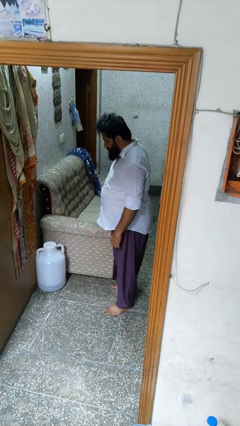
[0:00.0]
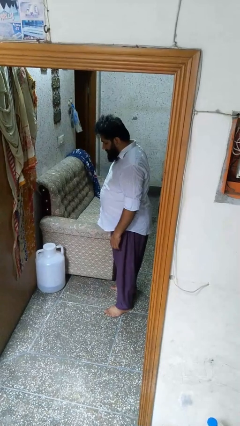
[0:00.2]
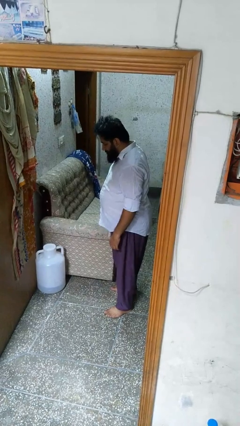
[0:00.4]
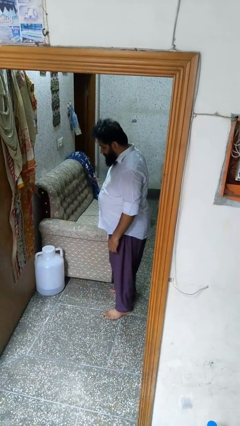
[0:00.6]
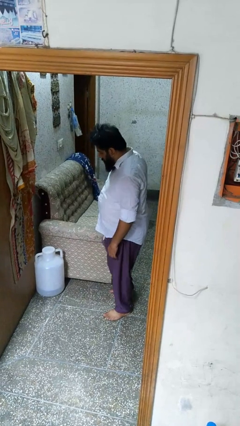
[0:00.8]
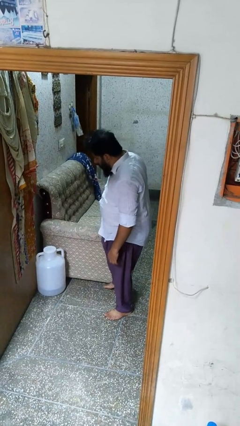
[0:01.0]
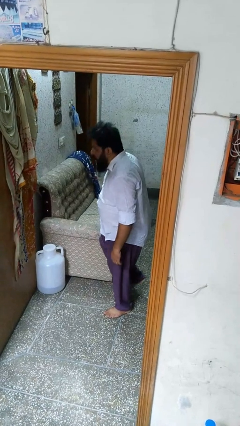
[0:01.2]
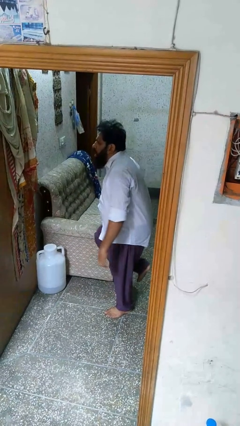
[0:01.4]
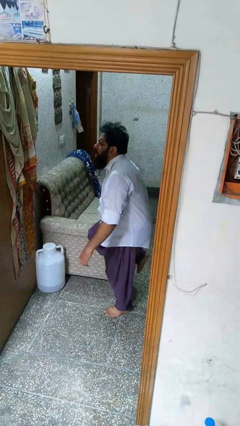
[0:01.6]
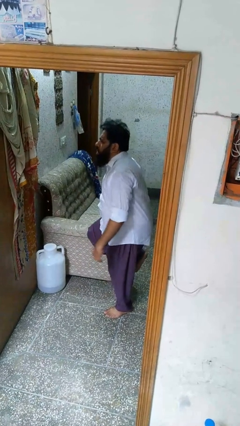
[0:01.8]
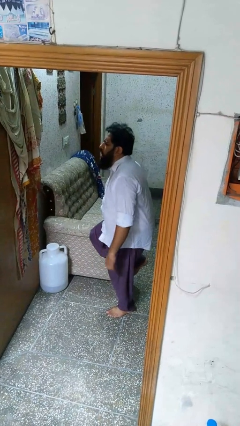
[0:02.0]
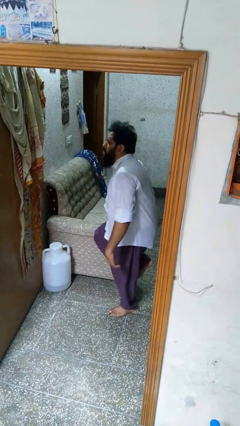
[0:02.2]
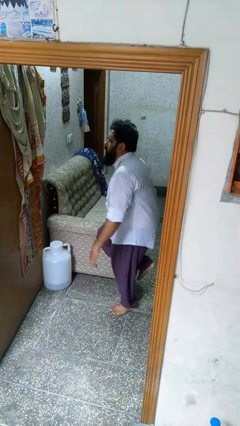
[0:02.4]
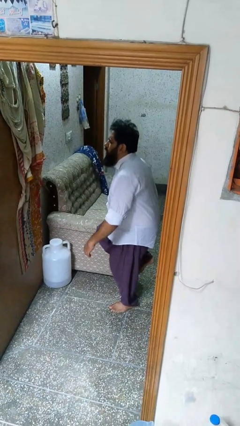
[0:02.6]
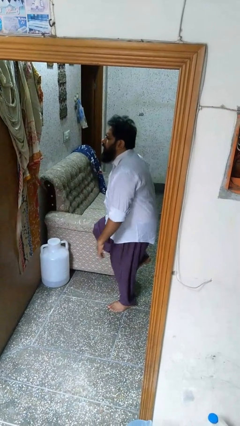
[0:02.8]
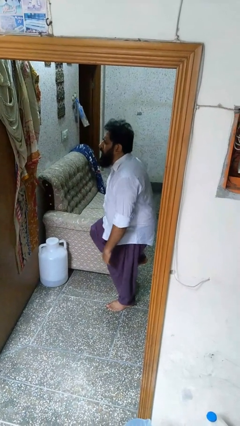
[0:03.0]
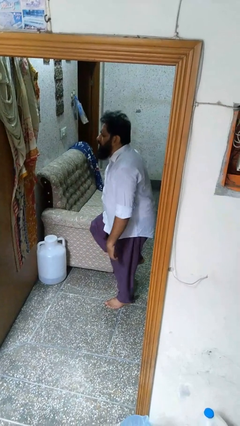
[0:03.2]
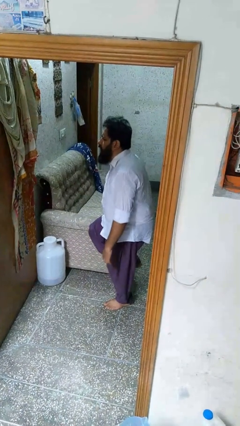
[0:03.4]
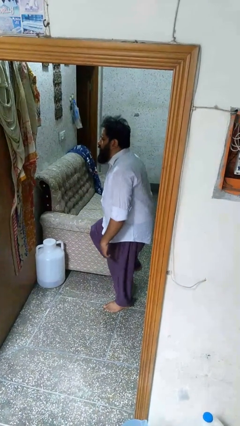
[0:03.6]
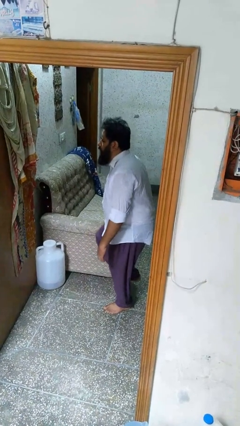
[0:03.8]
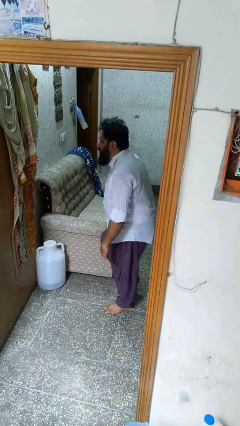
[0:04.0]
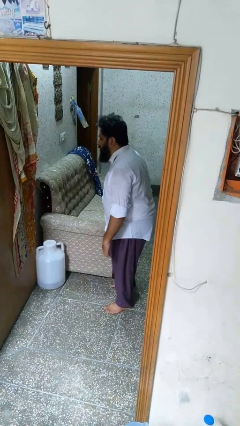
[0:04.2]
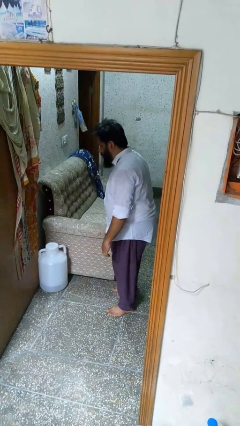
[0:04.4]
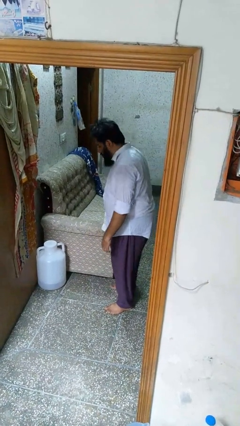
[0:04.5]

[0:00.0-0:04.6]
person stubs toe

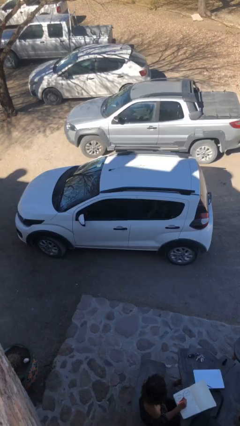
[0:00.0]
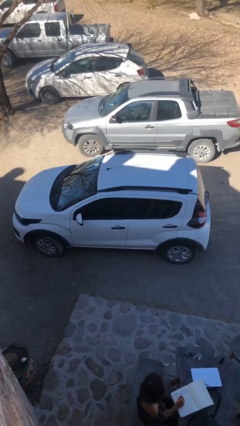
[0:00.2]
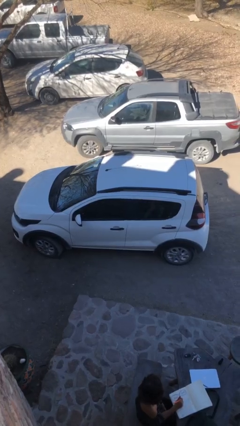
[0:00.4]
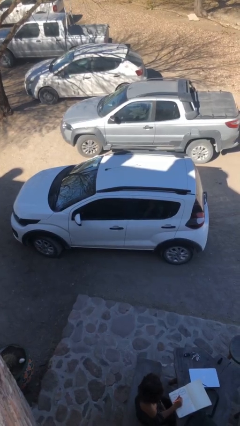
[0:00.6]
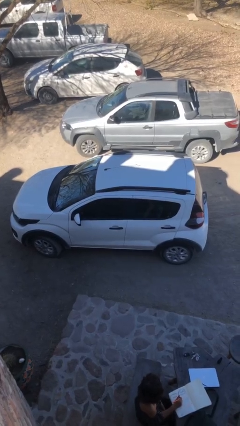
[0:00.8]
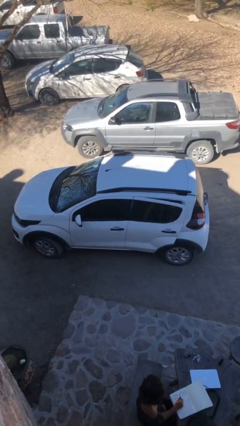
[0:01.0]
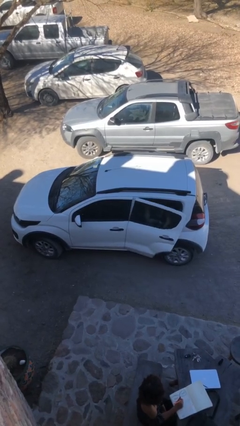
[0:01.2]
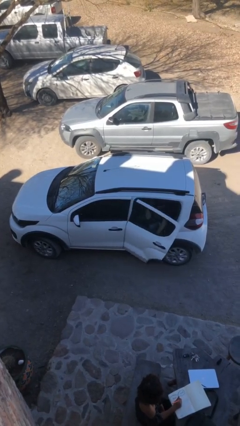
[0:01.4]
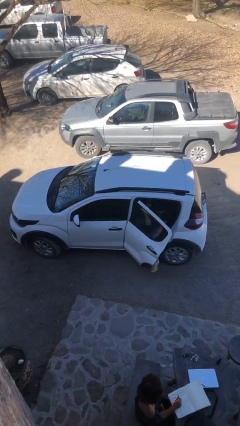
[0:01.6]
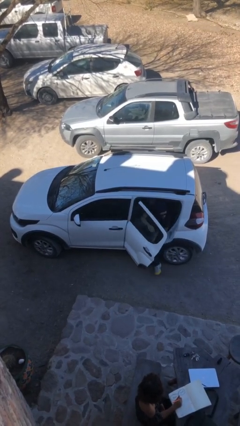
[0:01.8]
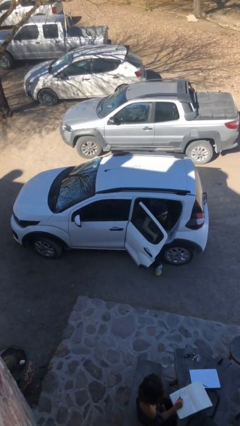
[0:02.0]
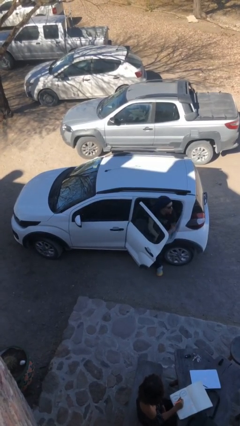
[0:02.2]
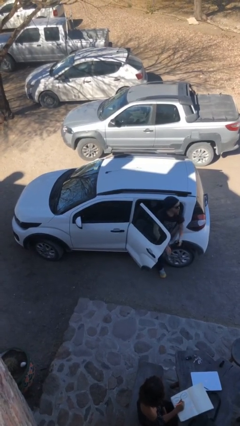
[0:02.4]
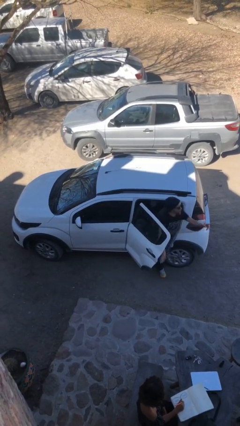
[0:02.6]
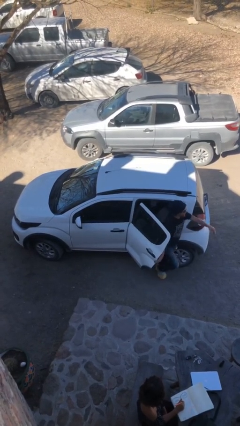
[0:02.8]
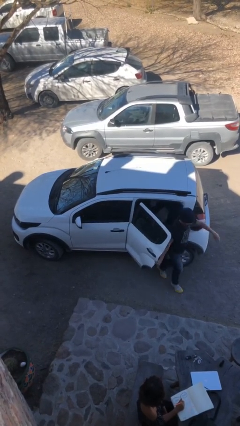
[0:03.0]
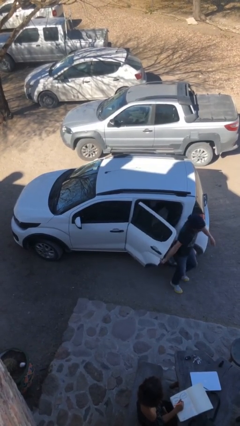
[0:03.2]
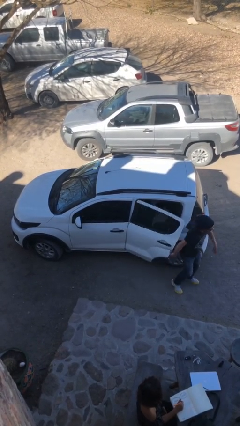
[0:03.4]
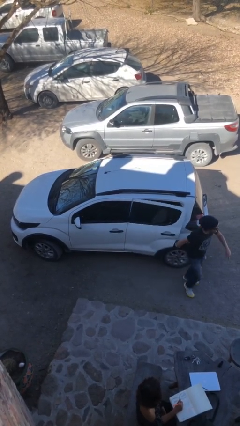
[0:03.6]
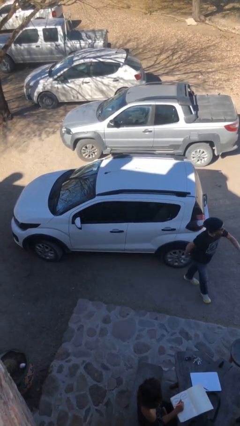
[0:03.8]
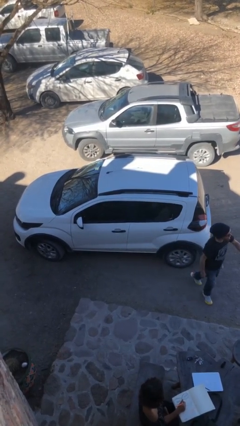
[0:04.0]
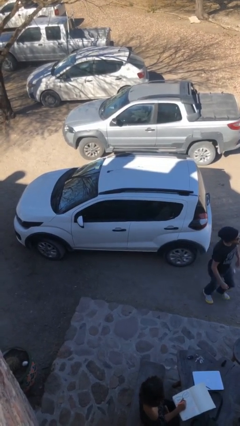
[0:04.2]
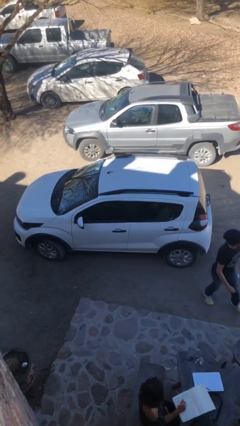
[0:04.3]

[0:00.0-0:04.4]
car drops off person

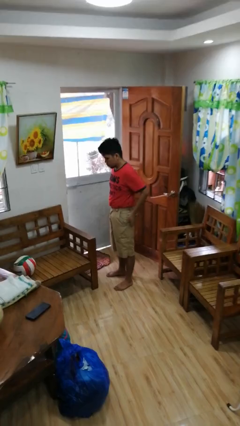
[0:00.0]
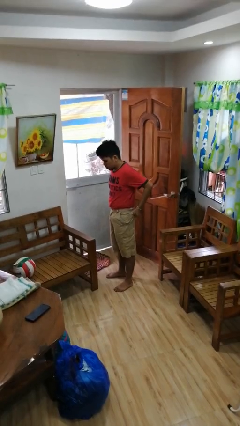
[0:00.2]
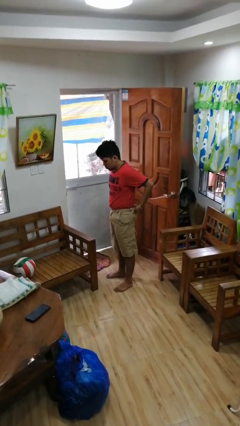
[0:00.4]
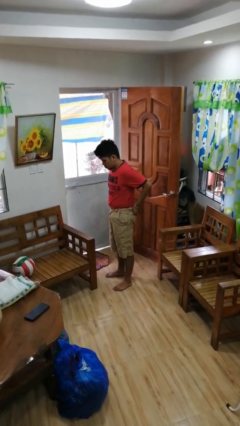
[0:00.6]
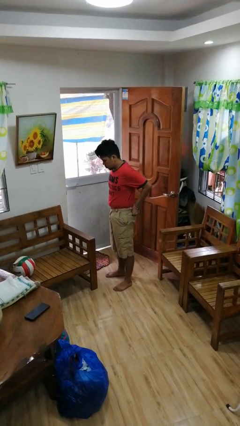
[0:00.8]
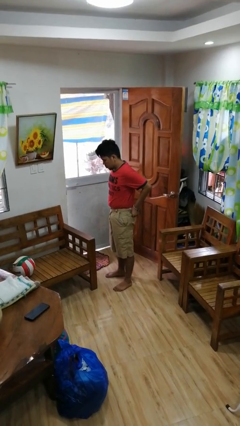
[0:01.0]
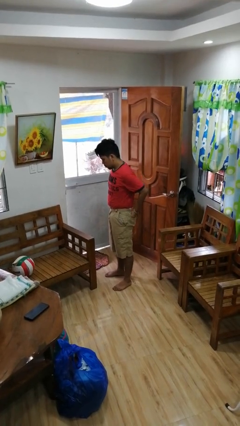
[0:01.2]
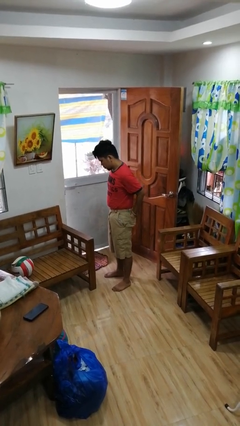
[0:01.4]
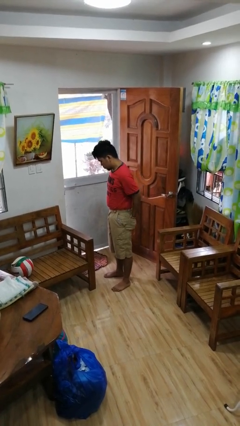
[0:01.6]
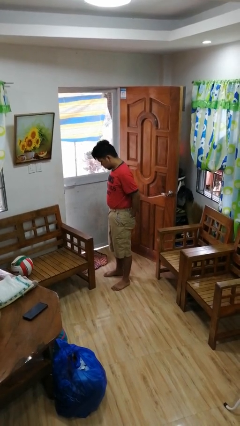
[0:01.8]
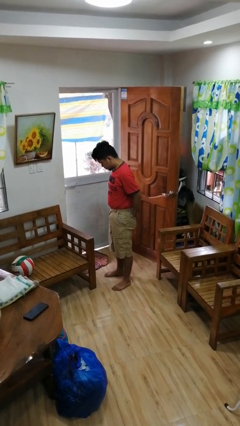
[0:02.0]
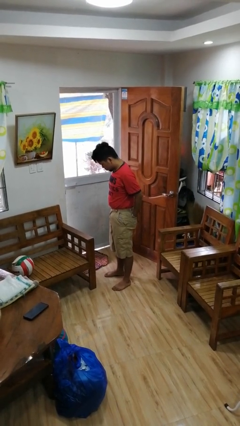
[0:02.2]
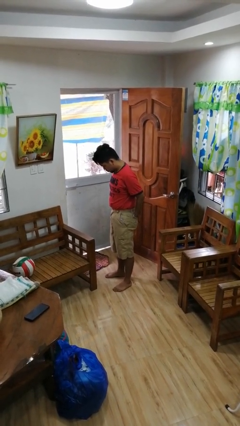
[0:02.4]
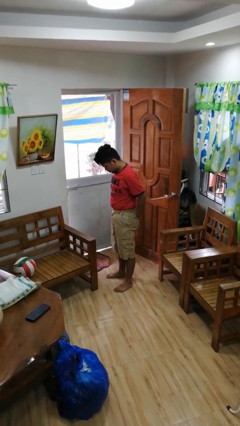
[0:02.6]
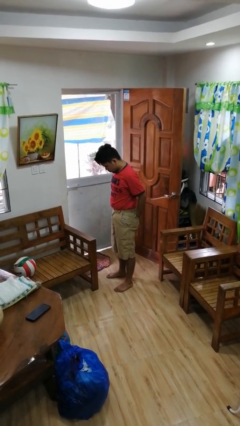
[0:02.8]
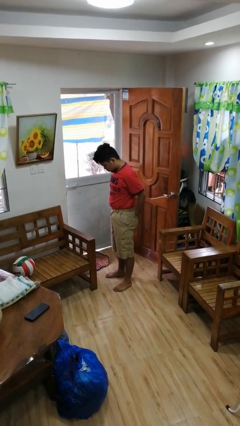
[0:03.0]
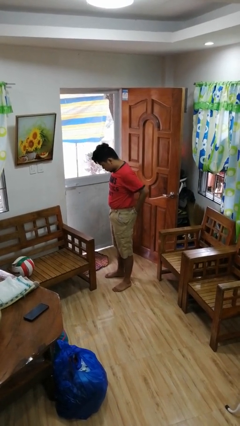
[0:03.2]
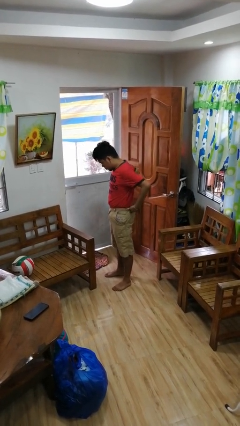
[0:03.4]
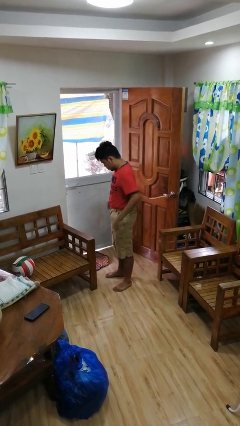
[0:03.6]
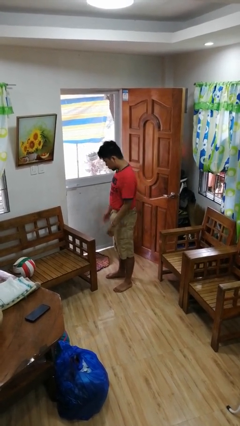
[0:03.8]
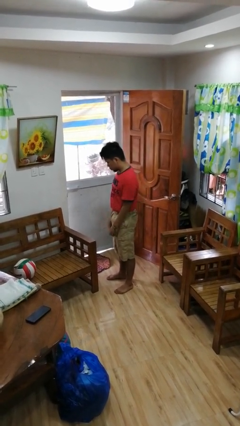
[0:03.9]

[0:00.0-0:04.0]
person puts hands in back pockets

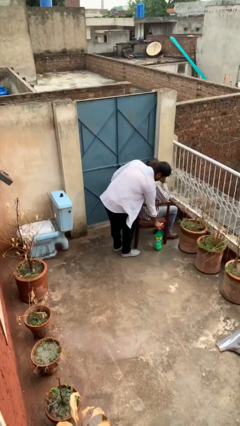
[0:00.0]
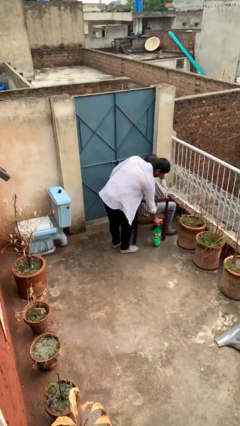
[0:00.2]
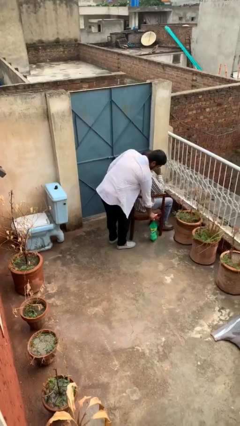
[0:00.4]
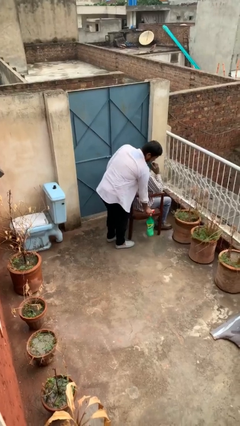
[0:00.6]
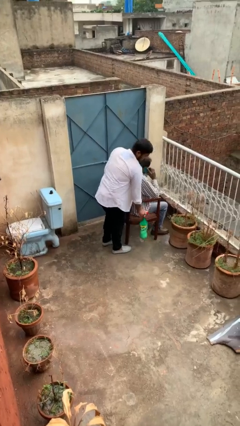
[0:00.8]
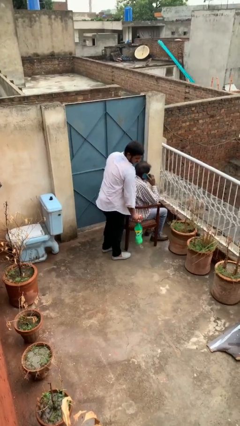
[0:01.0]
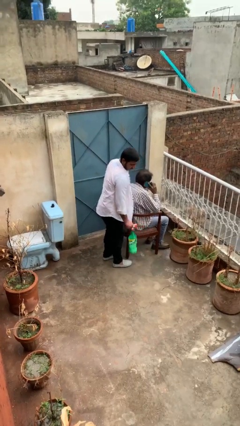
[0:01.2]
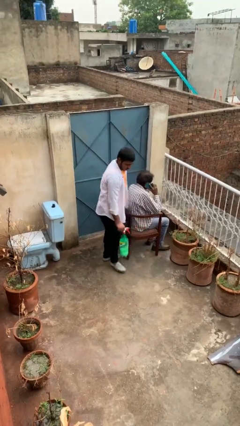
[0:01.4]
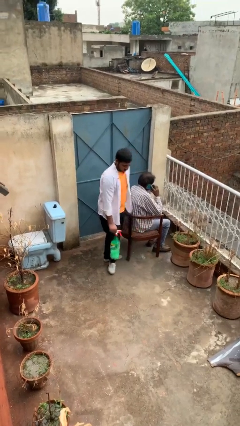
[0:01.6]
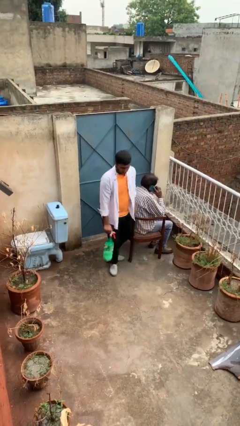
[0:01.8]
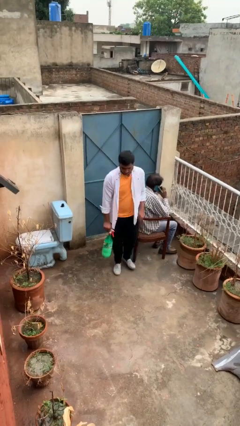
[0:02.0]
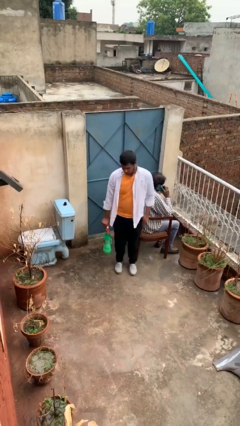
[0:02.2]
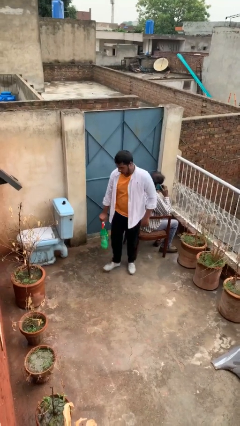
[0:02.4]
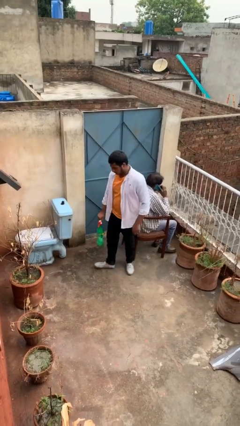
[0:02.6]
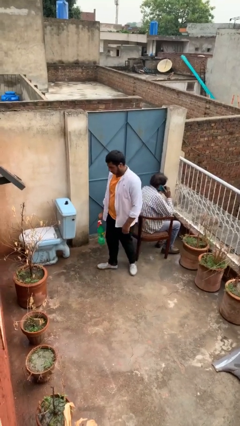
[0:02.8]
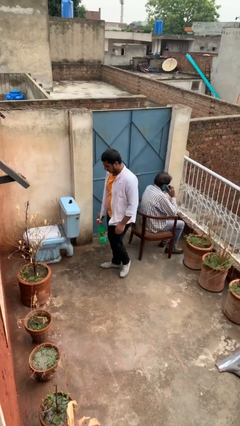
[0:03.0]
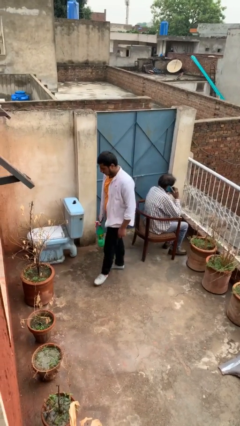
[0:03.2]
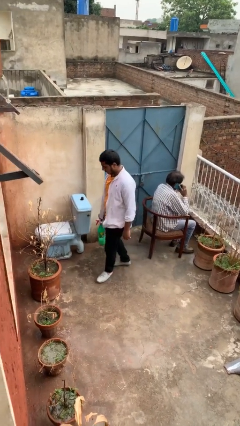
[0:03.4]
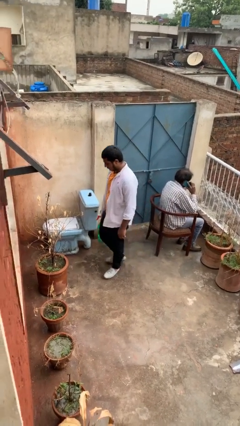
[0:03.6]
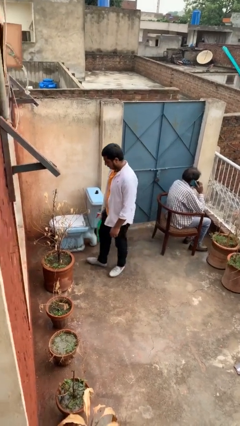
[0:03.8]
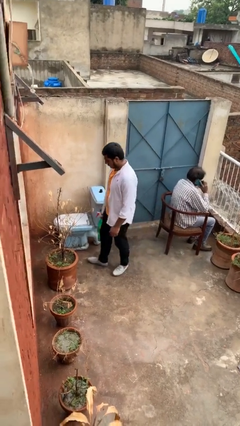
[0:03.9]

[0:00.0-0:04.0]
person steals object from person

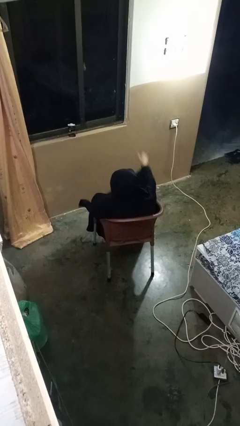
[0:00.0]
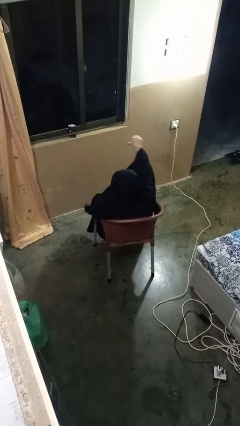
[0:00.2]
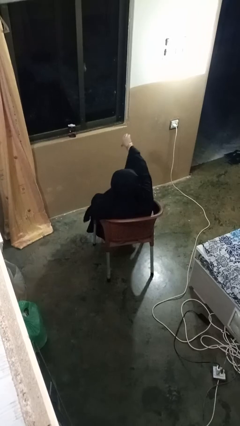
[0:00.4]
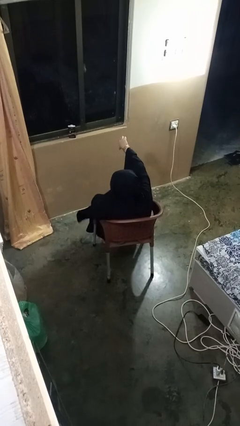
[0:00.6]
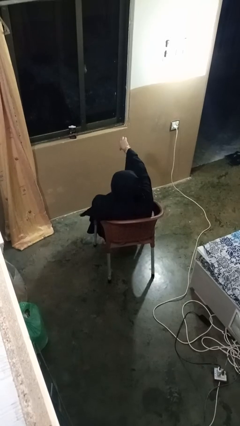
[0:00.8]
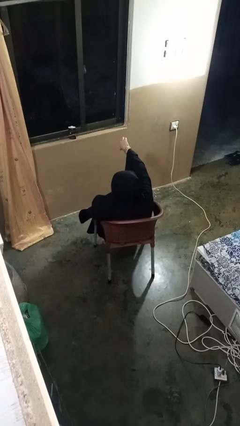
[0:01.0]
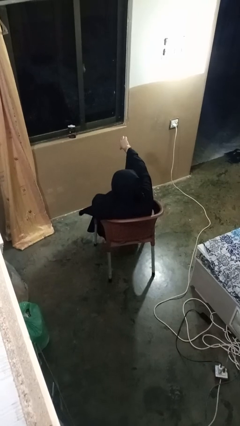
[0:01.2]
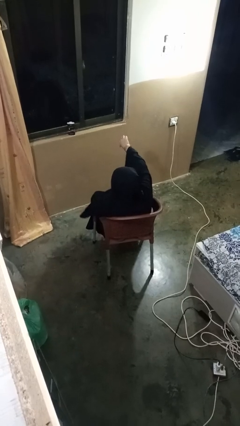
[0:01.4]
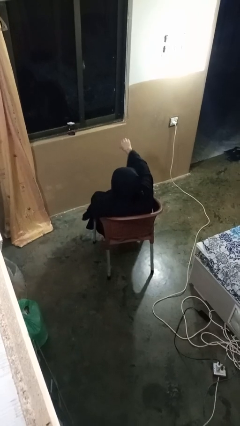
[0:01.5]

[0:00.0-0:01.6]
person gestures thumbs down
